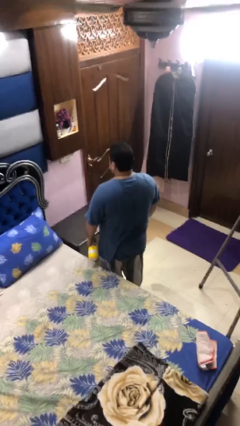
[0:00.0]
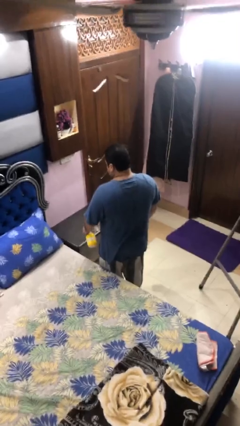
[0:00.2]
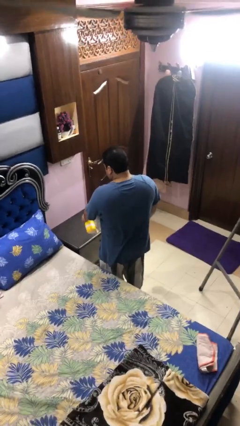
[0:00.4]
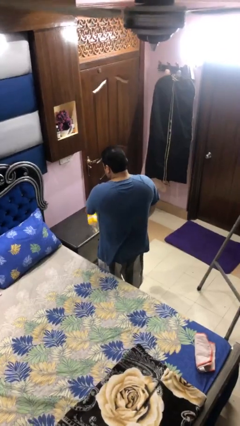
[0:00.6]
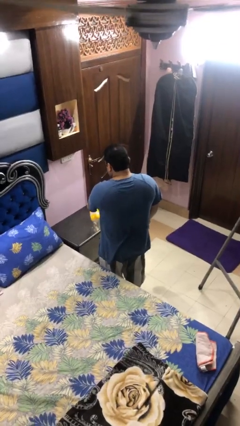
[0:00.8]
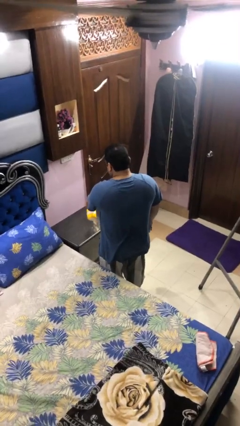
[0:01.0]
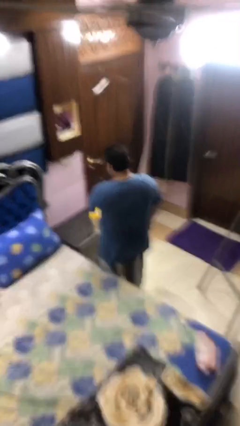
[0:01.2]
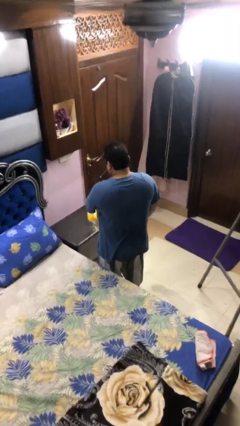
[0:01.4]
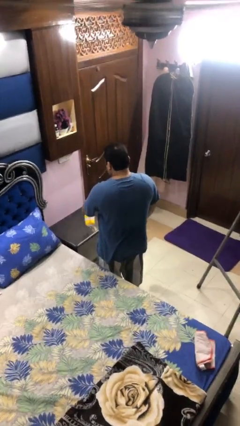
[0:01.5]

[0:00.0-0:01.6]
person sprays from bottle

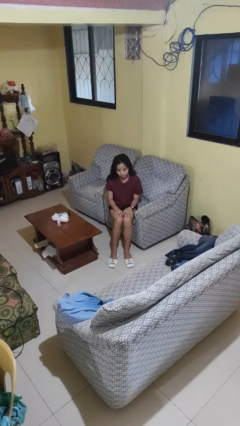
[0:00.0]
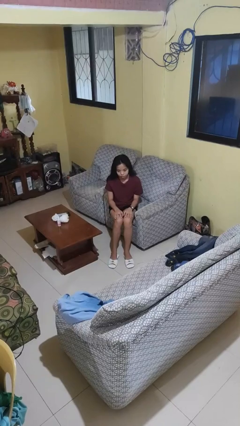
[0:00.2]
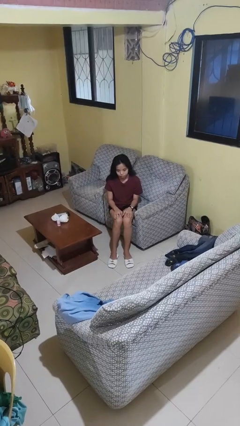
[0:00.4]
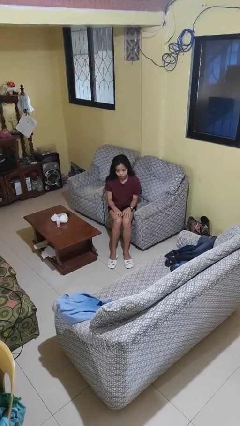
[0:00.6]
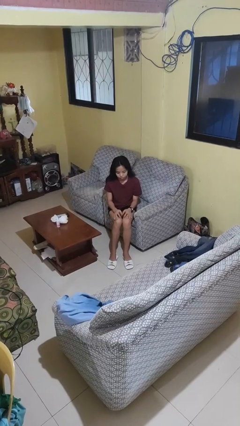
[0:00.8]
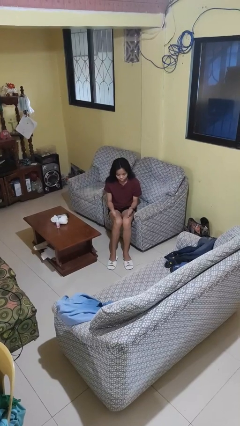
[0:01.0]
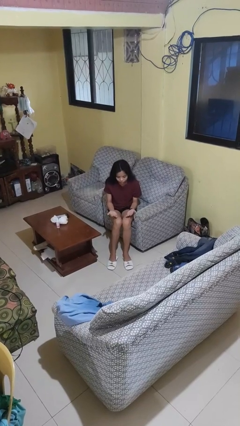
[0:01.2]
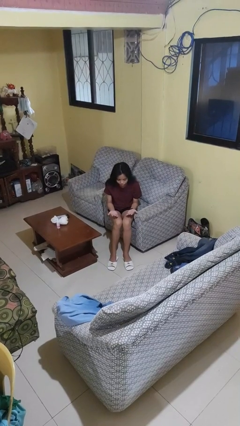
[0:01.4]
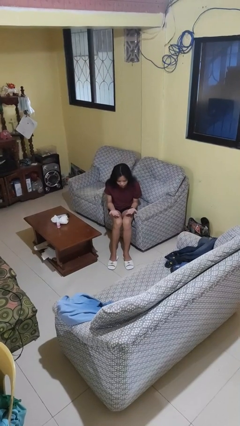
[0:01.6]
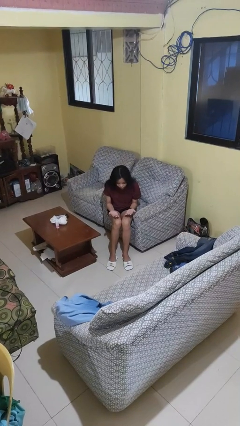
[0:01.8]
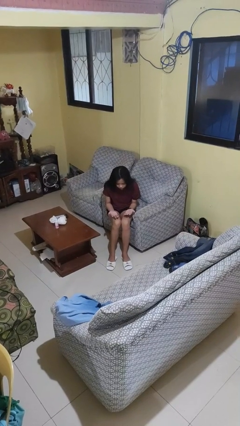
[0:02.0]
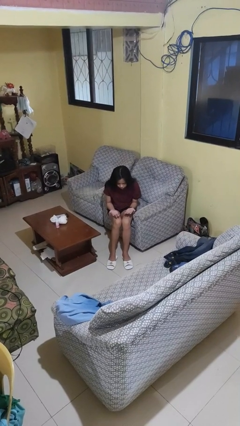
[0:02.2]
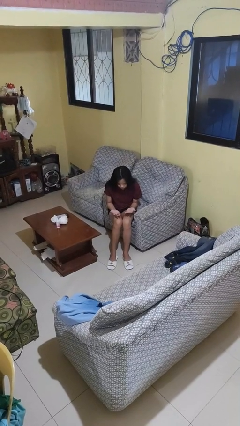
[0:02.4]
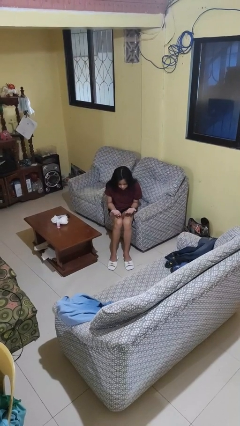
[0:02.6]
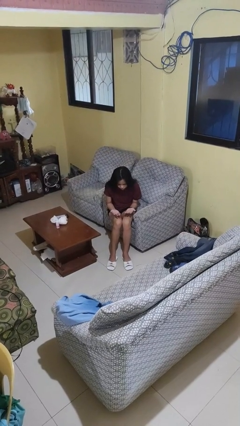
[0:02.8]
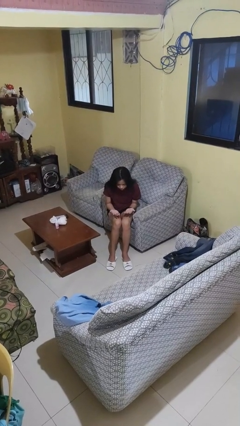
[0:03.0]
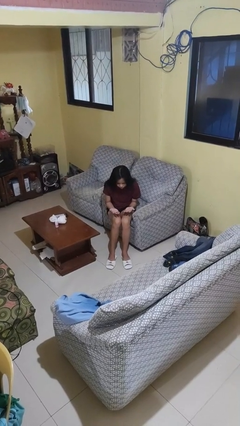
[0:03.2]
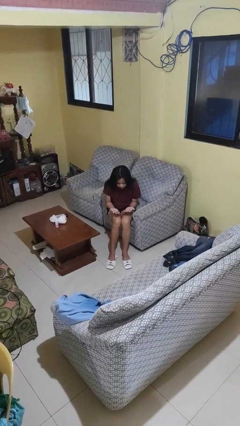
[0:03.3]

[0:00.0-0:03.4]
person looks at hands in lap

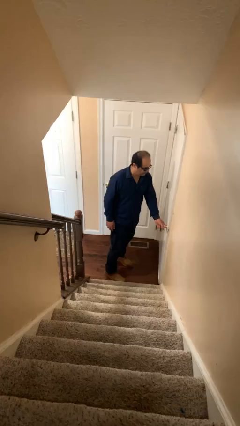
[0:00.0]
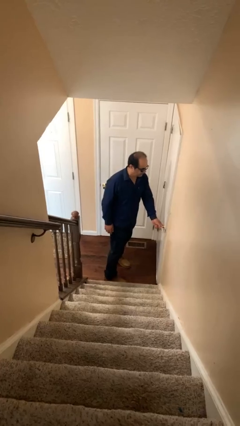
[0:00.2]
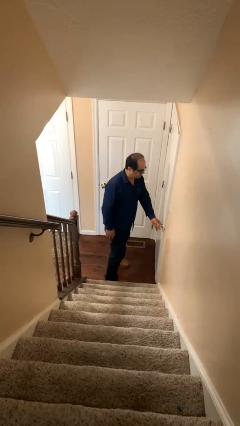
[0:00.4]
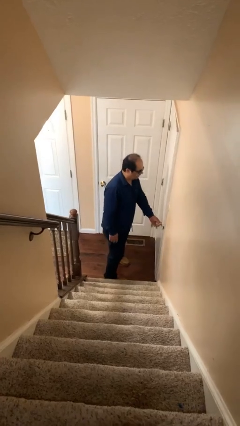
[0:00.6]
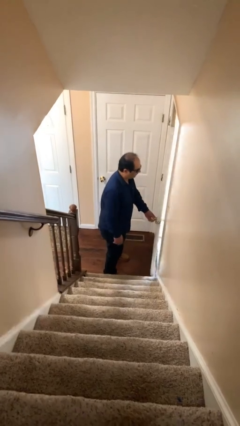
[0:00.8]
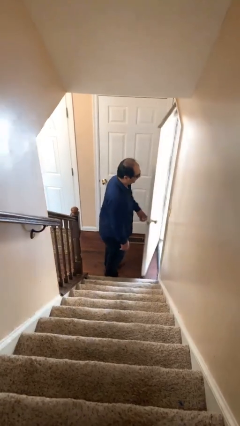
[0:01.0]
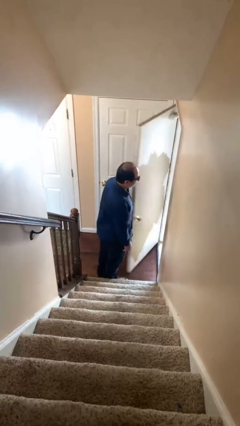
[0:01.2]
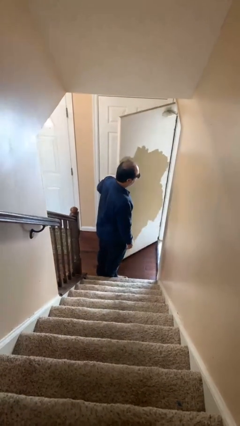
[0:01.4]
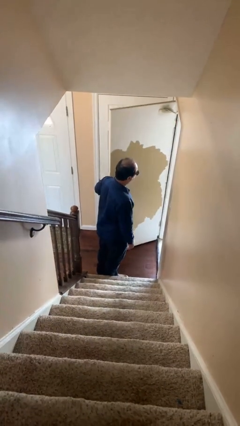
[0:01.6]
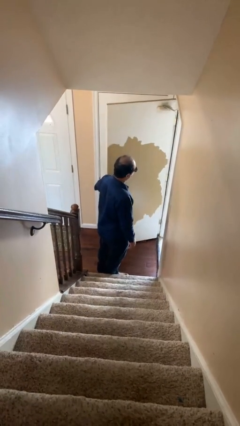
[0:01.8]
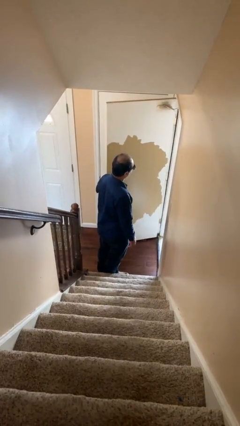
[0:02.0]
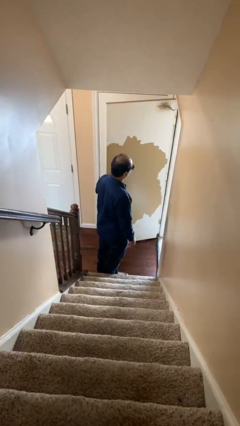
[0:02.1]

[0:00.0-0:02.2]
person opens facility door

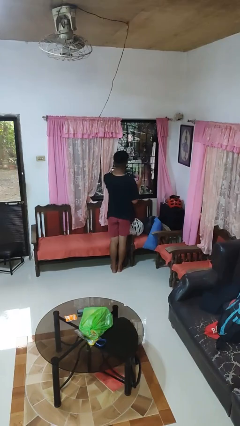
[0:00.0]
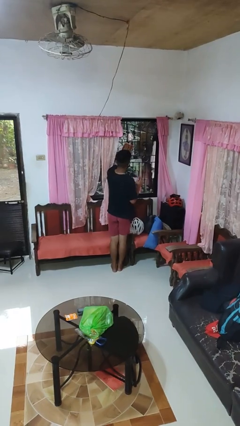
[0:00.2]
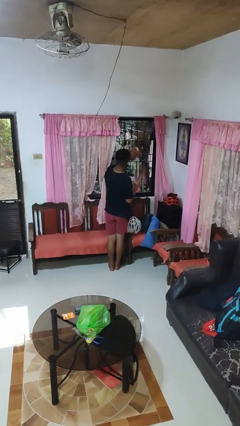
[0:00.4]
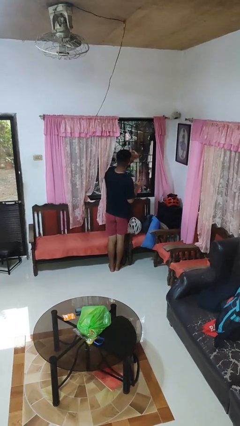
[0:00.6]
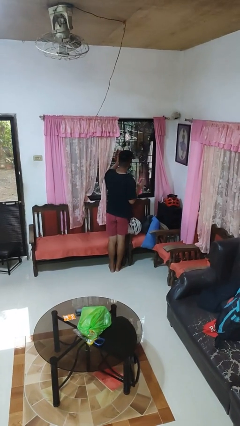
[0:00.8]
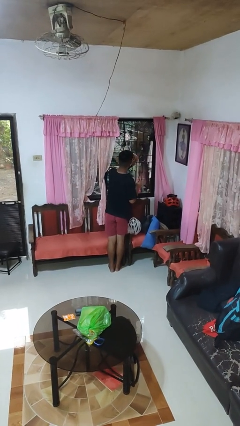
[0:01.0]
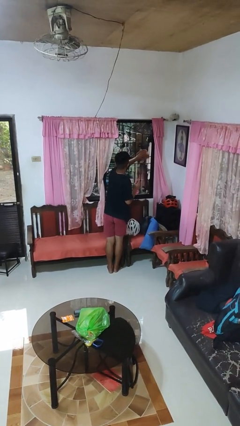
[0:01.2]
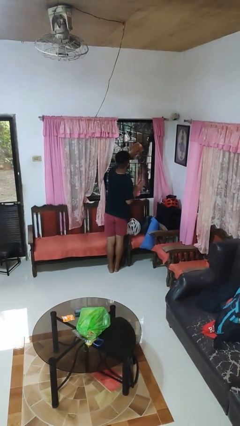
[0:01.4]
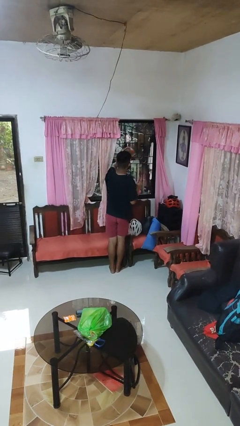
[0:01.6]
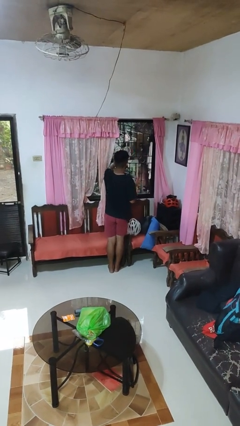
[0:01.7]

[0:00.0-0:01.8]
person washes window

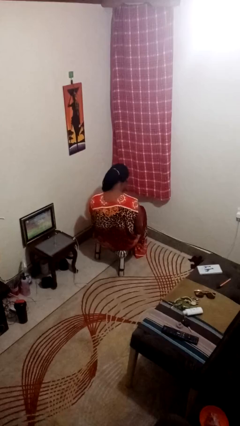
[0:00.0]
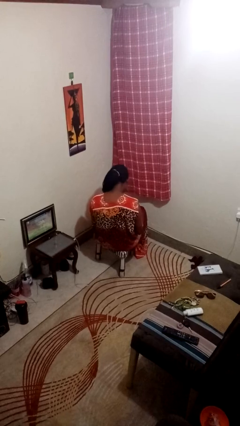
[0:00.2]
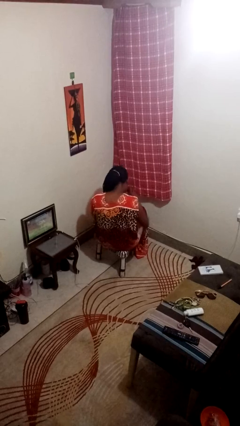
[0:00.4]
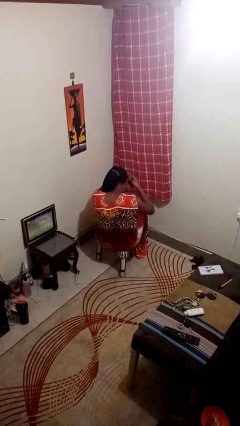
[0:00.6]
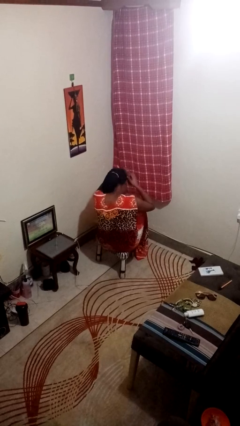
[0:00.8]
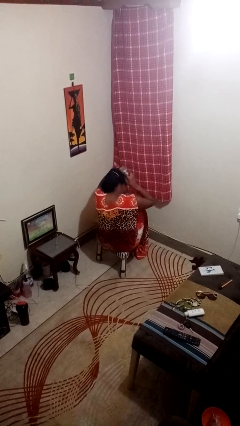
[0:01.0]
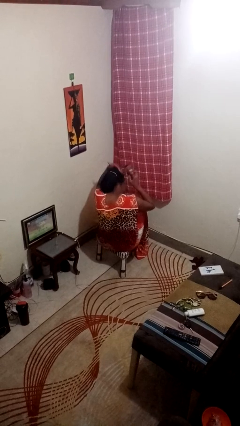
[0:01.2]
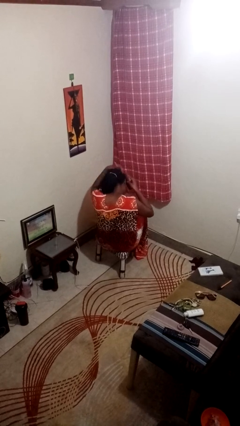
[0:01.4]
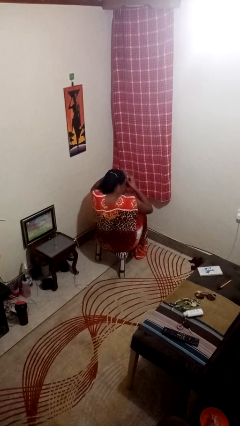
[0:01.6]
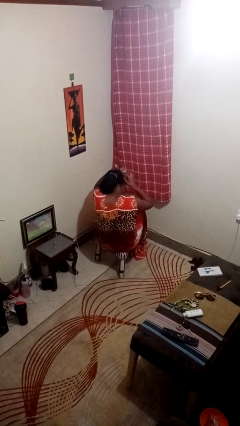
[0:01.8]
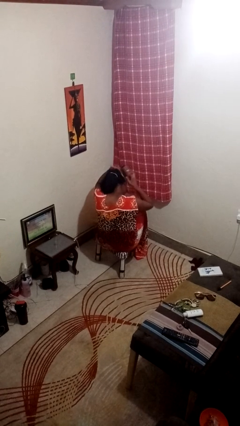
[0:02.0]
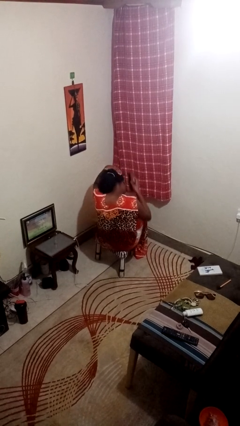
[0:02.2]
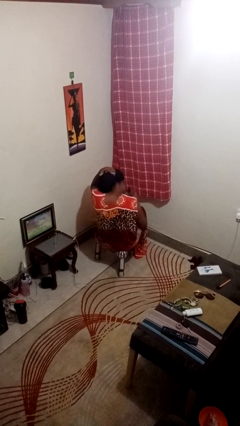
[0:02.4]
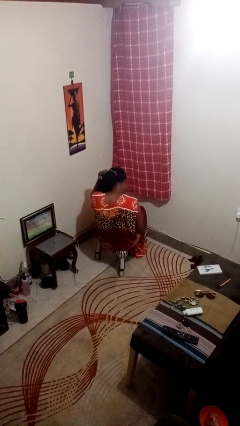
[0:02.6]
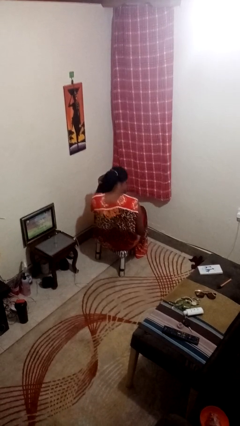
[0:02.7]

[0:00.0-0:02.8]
person brushes hair

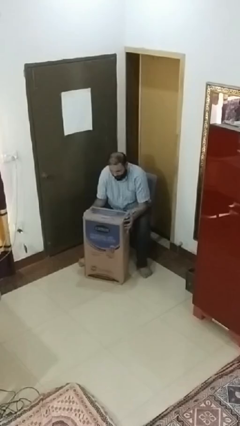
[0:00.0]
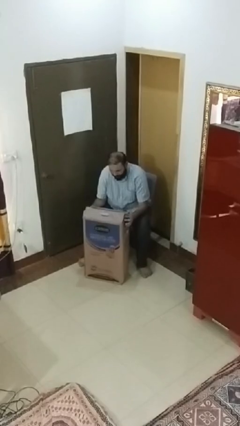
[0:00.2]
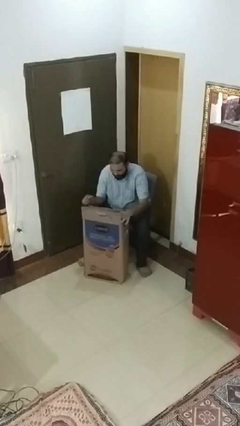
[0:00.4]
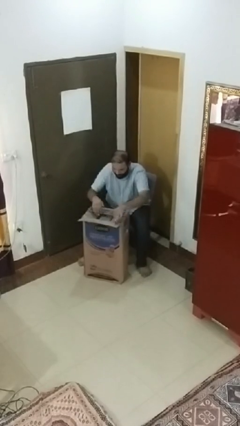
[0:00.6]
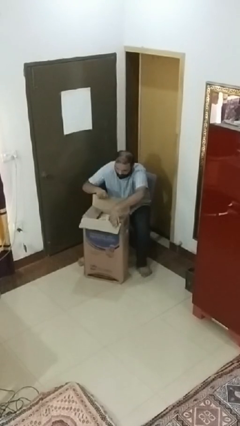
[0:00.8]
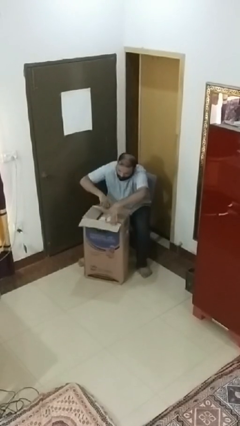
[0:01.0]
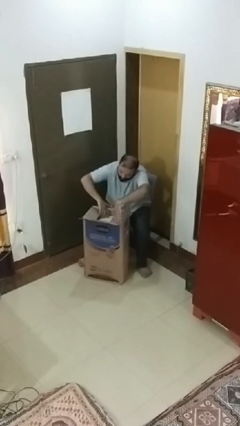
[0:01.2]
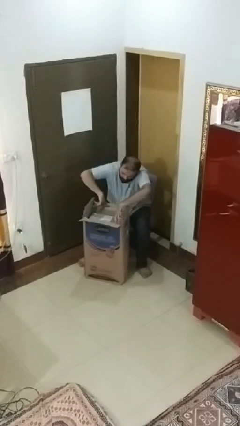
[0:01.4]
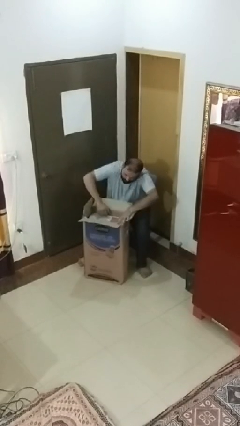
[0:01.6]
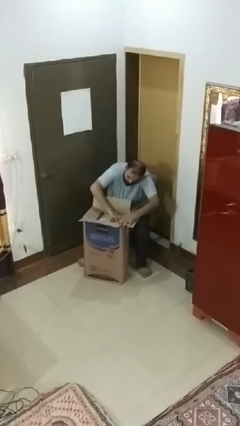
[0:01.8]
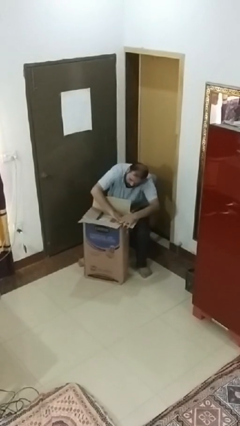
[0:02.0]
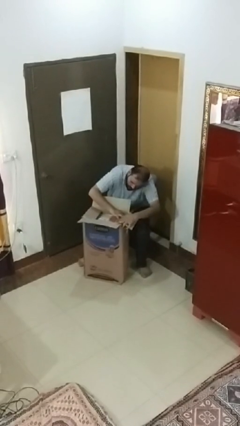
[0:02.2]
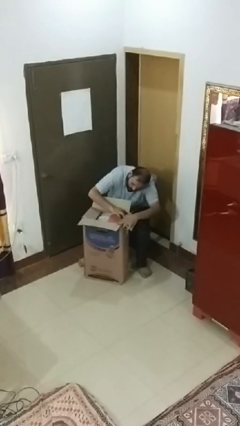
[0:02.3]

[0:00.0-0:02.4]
person searches in box

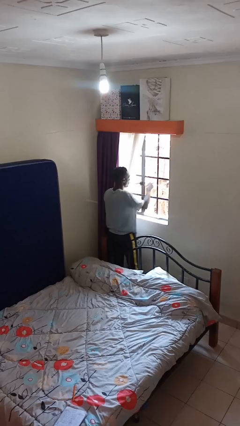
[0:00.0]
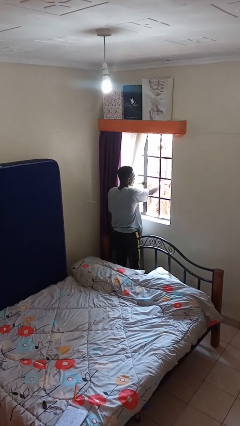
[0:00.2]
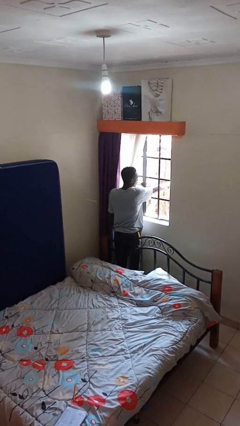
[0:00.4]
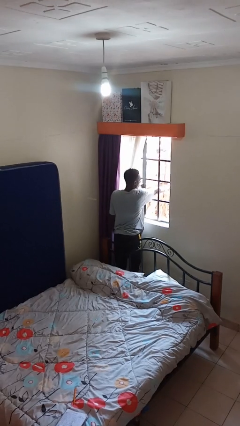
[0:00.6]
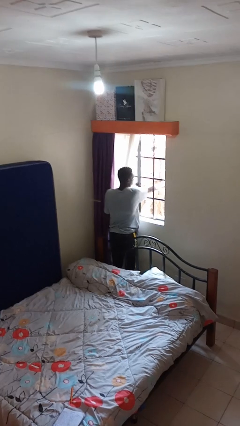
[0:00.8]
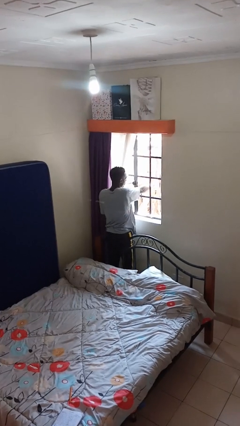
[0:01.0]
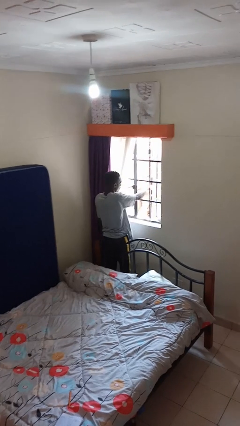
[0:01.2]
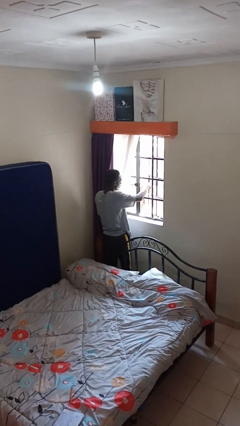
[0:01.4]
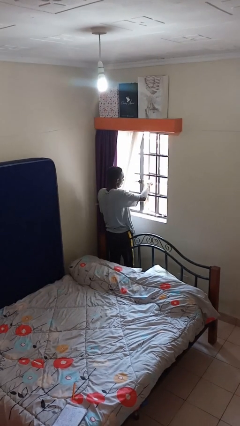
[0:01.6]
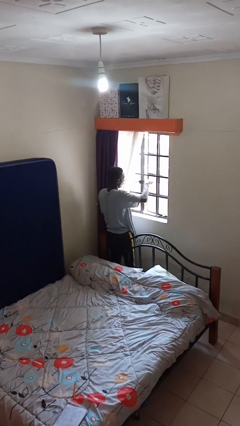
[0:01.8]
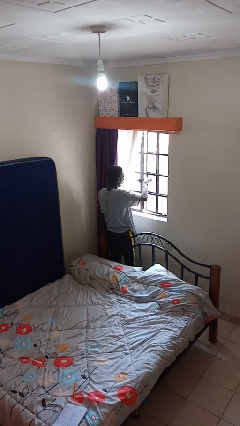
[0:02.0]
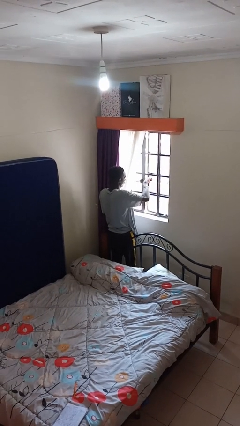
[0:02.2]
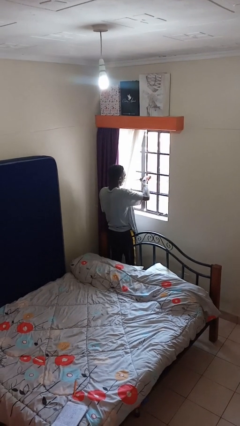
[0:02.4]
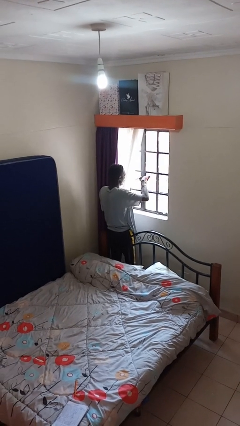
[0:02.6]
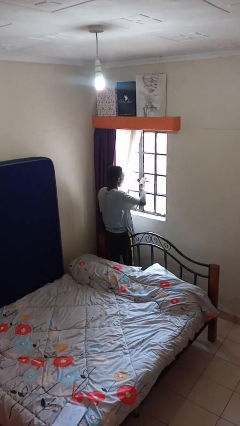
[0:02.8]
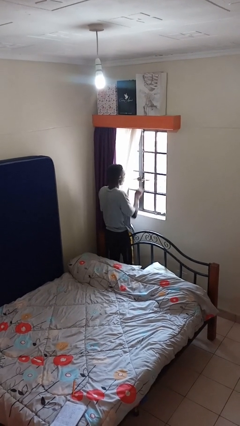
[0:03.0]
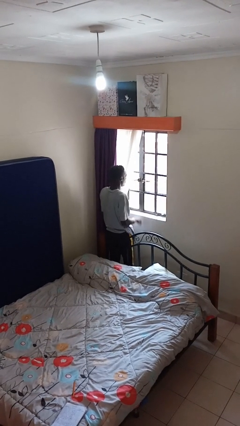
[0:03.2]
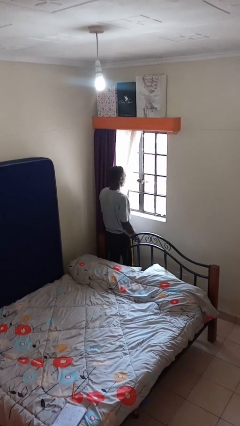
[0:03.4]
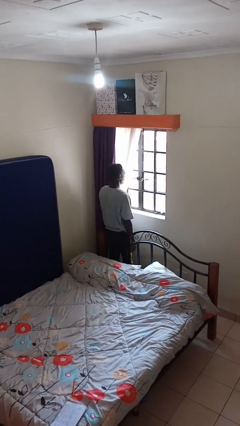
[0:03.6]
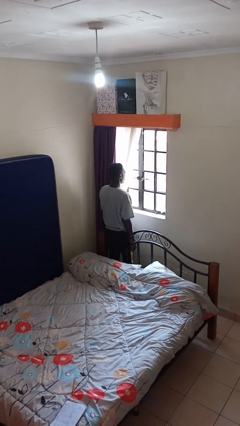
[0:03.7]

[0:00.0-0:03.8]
person closes home window
